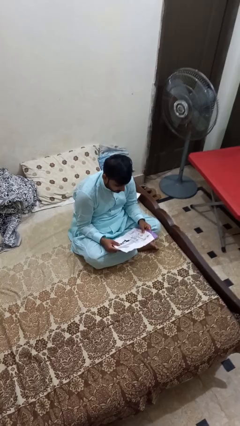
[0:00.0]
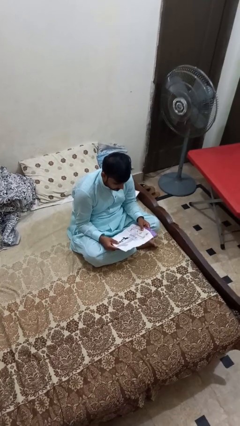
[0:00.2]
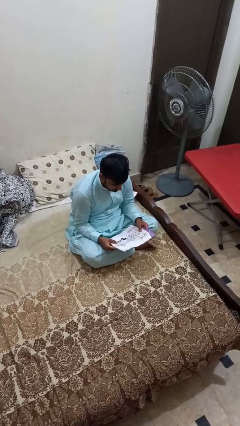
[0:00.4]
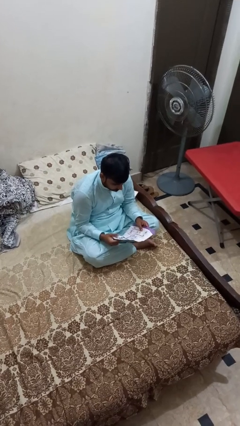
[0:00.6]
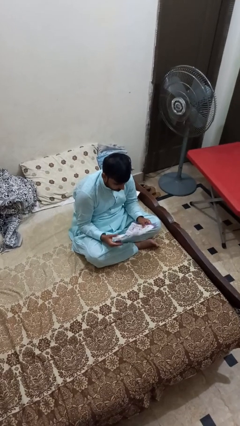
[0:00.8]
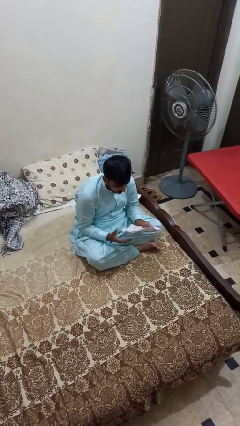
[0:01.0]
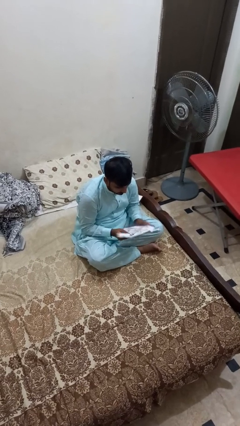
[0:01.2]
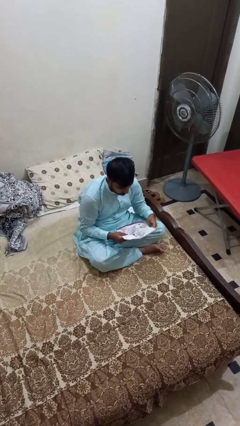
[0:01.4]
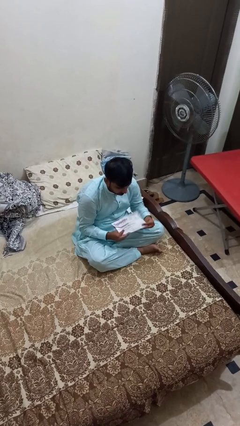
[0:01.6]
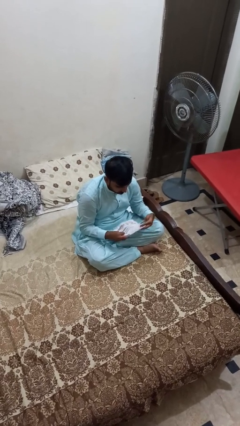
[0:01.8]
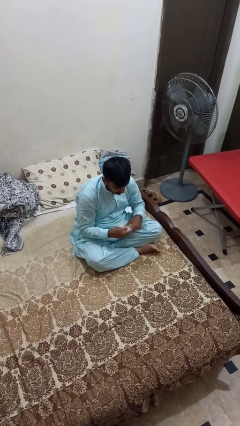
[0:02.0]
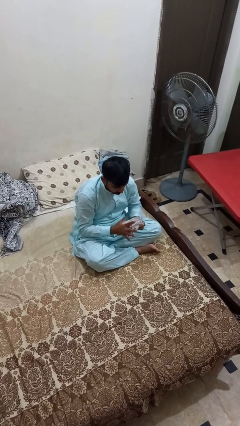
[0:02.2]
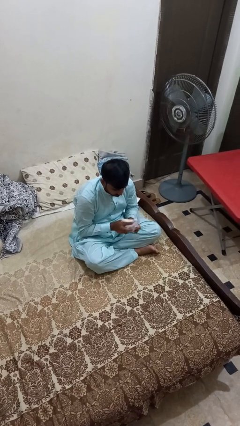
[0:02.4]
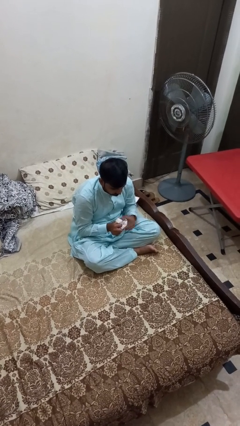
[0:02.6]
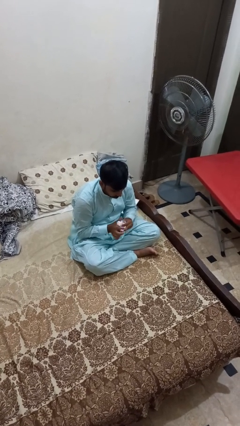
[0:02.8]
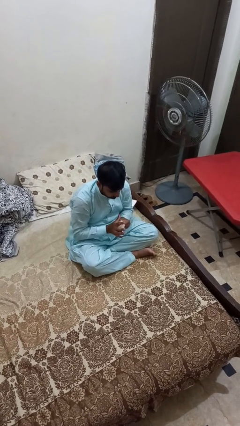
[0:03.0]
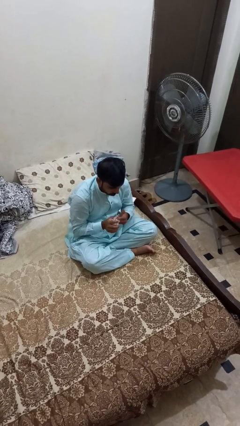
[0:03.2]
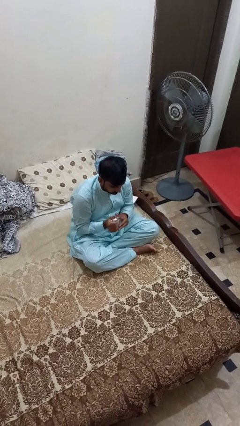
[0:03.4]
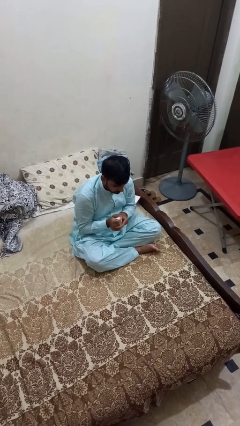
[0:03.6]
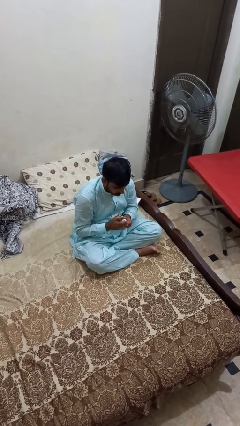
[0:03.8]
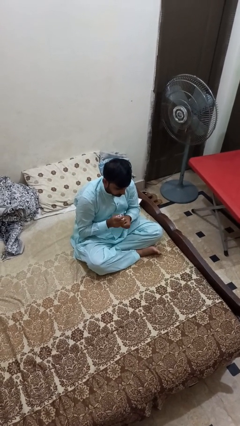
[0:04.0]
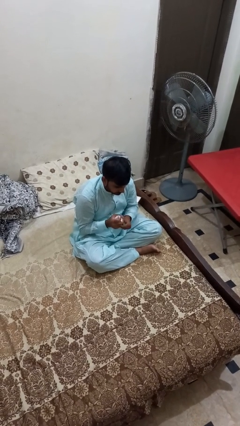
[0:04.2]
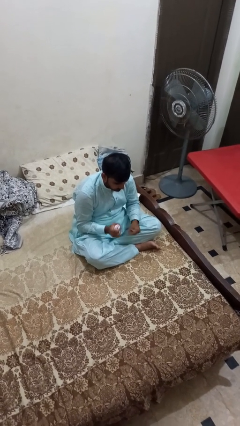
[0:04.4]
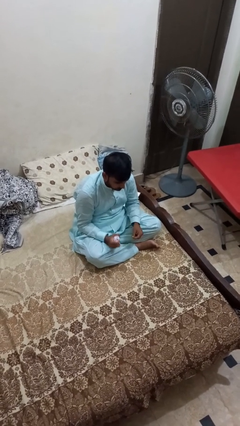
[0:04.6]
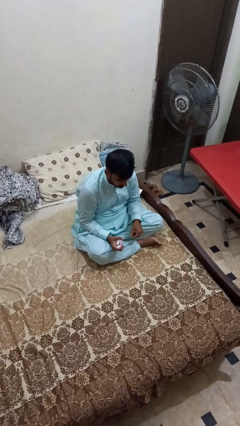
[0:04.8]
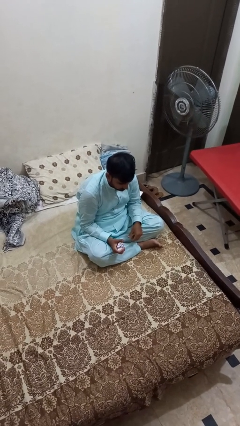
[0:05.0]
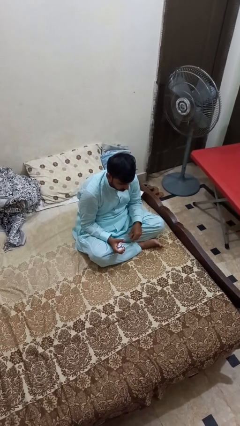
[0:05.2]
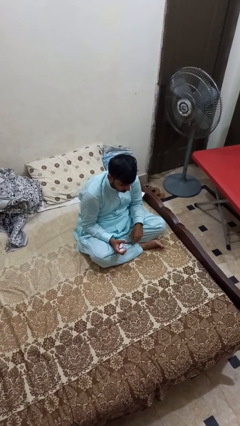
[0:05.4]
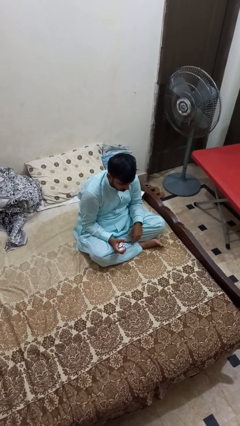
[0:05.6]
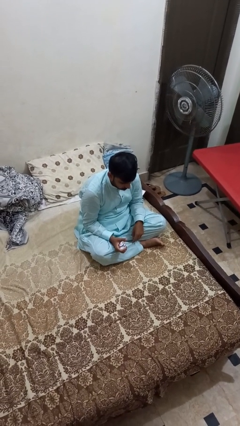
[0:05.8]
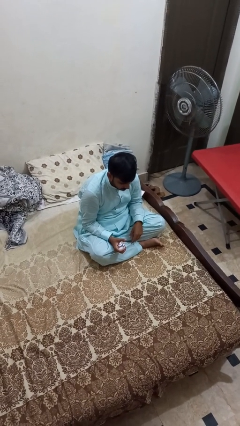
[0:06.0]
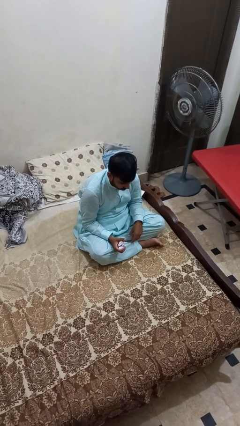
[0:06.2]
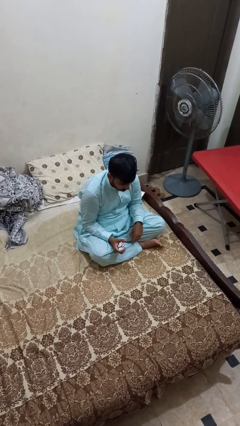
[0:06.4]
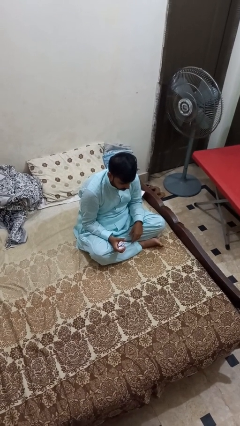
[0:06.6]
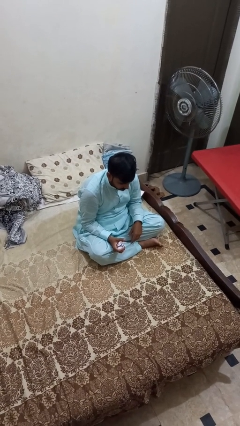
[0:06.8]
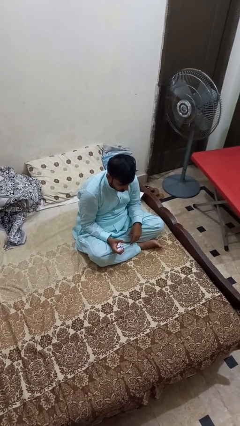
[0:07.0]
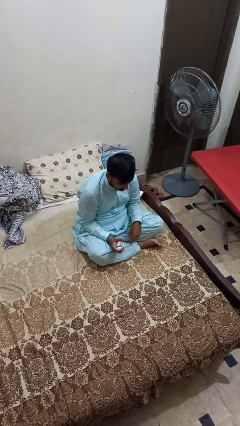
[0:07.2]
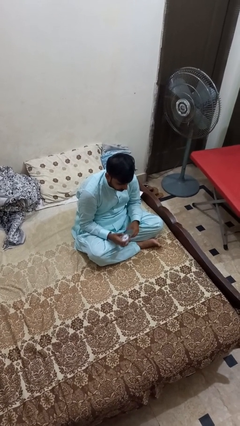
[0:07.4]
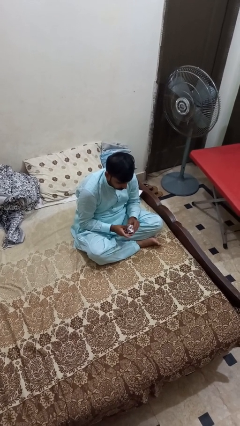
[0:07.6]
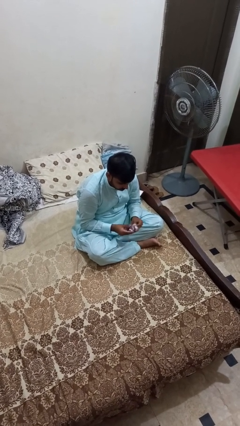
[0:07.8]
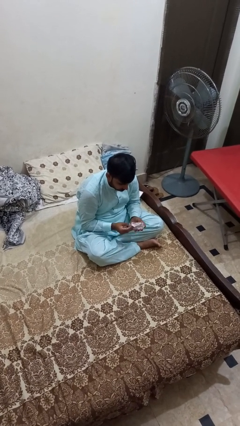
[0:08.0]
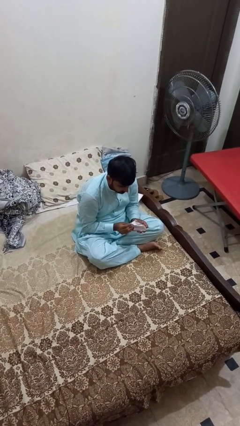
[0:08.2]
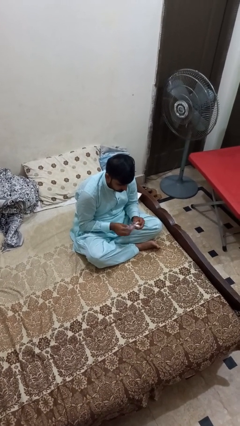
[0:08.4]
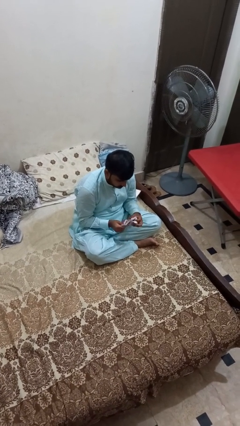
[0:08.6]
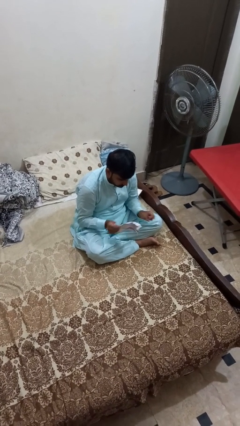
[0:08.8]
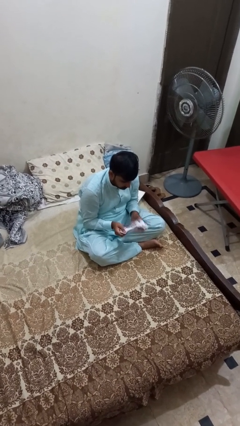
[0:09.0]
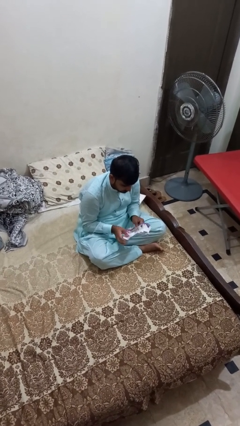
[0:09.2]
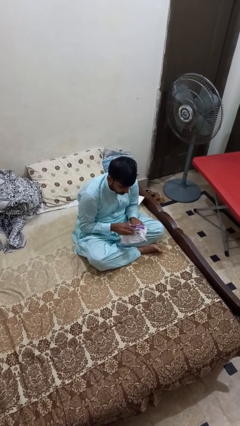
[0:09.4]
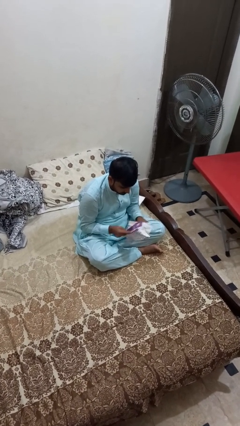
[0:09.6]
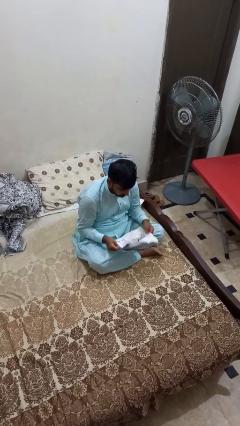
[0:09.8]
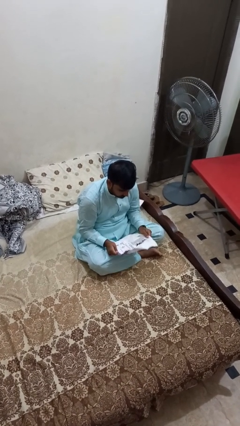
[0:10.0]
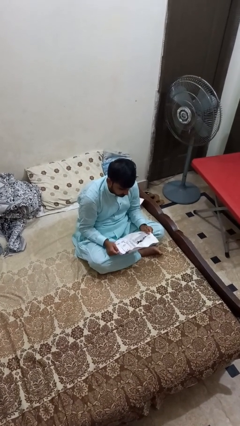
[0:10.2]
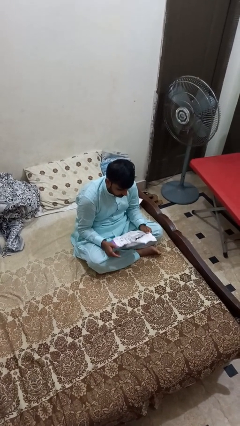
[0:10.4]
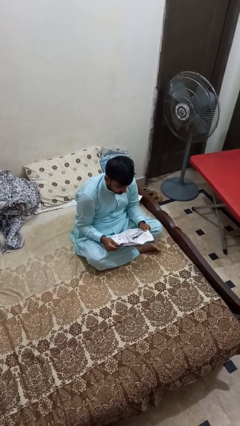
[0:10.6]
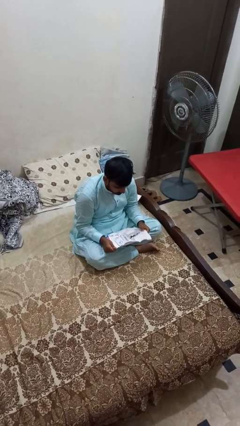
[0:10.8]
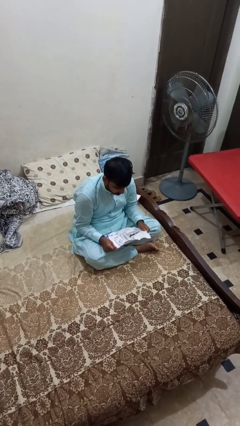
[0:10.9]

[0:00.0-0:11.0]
person crumples paper

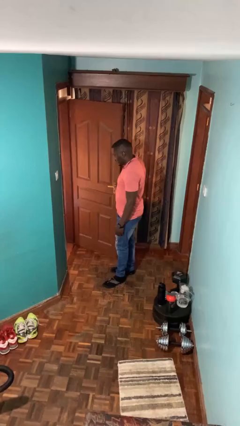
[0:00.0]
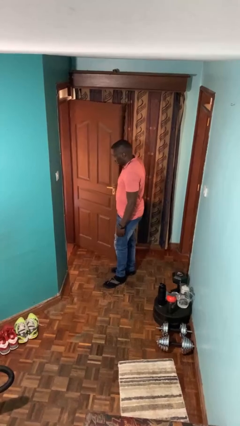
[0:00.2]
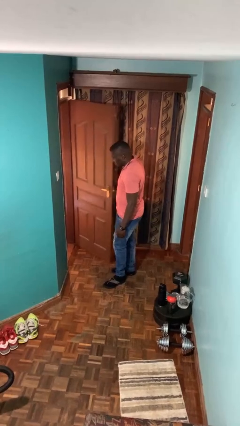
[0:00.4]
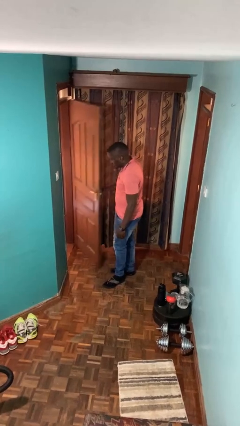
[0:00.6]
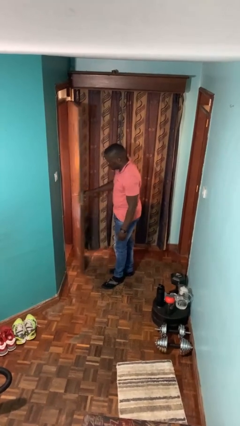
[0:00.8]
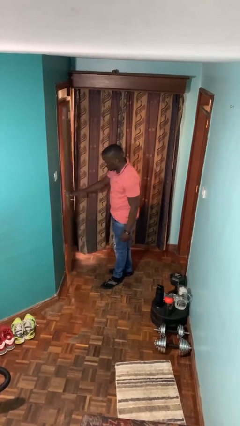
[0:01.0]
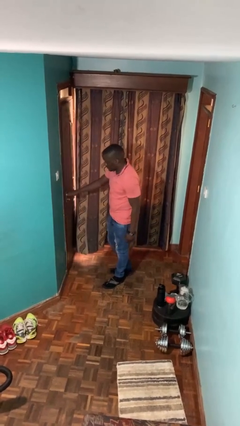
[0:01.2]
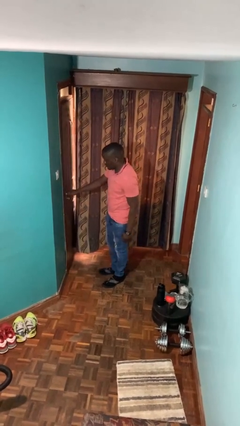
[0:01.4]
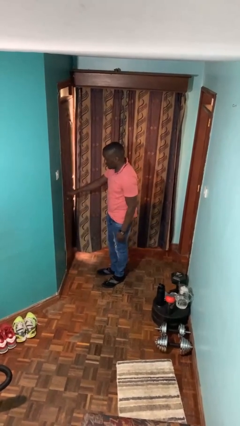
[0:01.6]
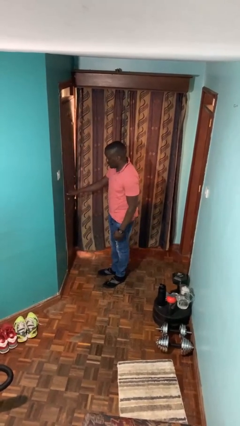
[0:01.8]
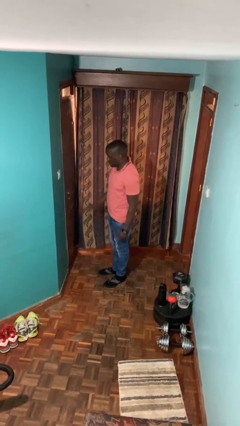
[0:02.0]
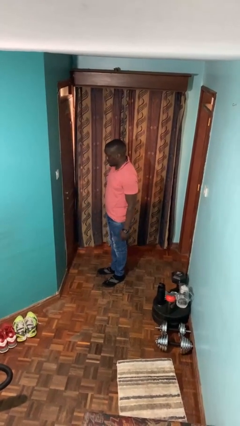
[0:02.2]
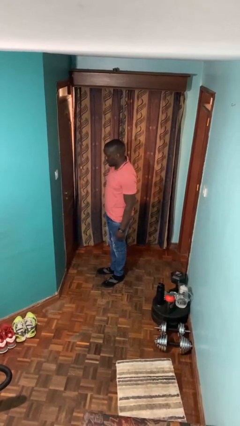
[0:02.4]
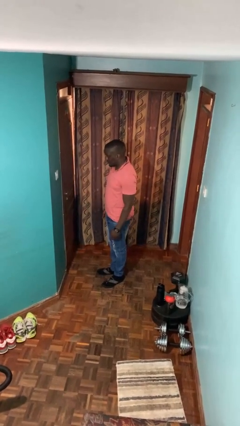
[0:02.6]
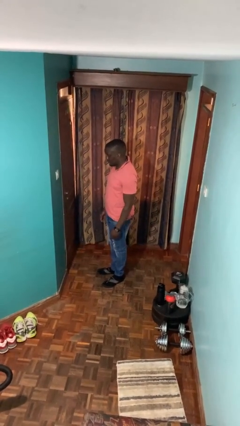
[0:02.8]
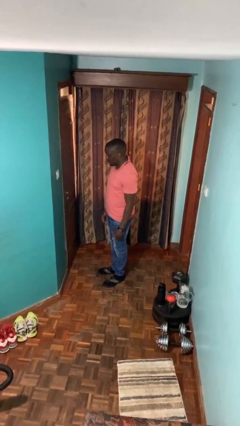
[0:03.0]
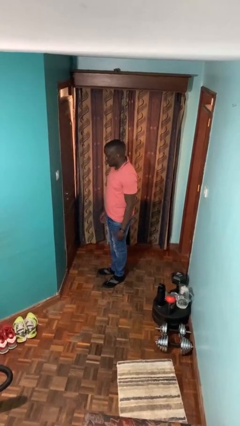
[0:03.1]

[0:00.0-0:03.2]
person closes facility door

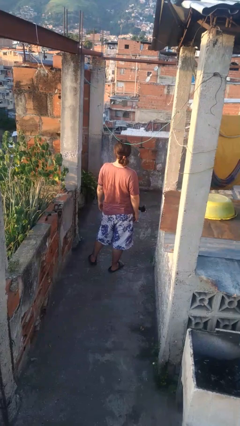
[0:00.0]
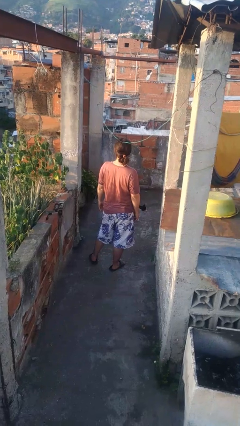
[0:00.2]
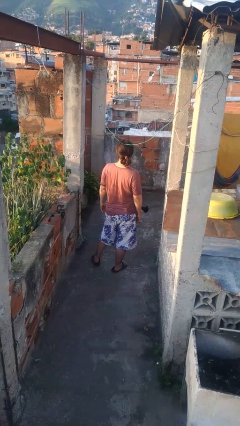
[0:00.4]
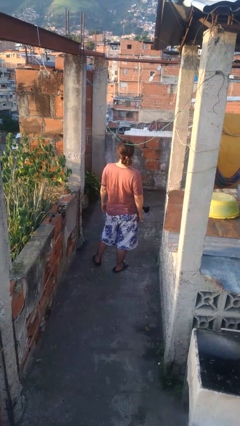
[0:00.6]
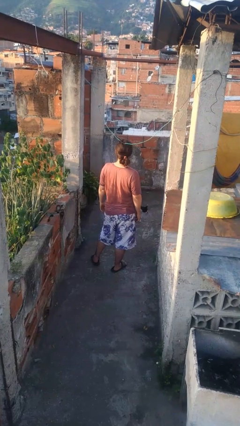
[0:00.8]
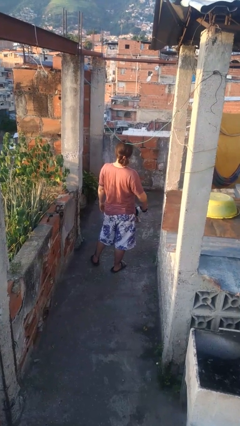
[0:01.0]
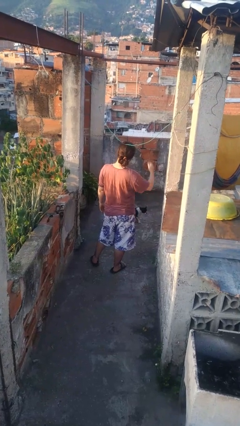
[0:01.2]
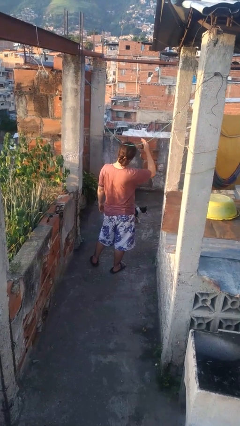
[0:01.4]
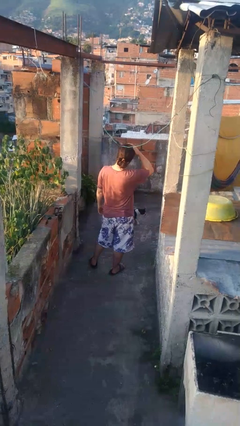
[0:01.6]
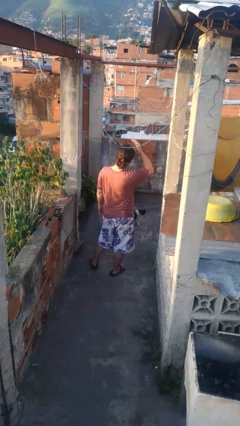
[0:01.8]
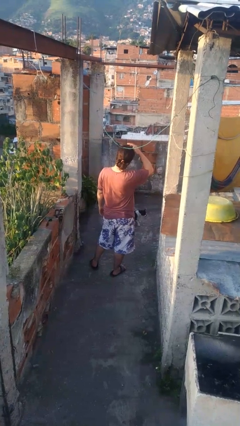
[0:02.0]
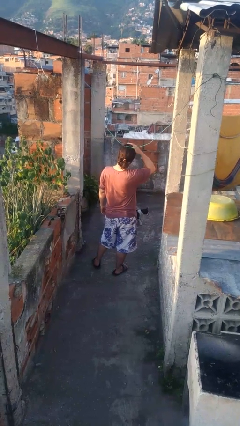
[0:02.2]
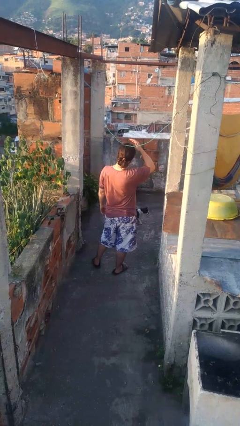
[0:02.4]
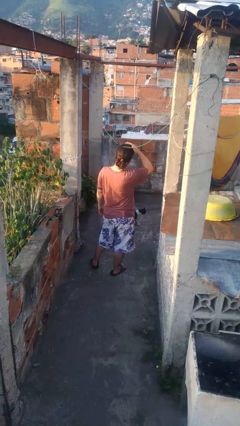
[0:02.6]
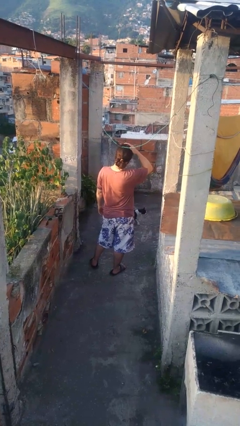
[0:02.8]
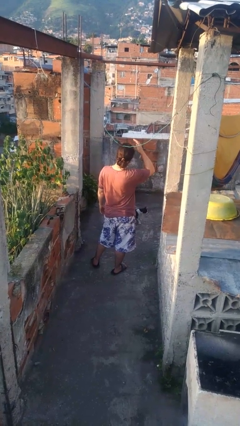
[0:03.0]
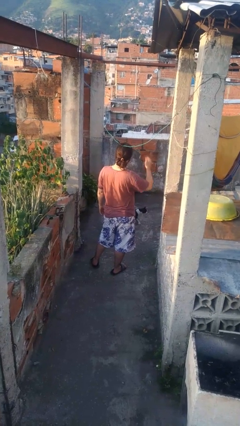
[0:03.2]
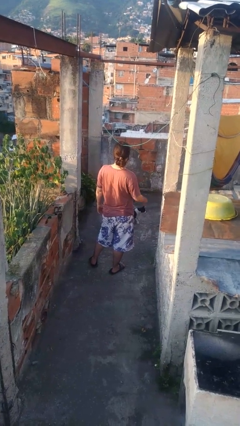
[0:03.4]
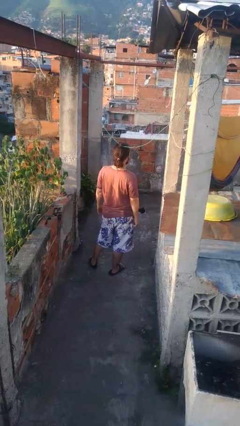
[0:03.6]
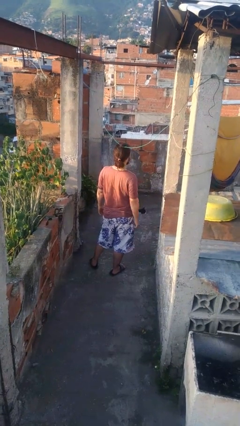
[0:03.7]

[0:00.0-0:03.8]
person pats head
